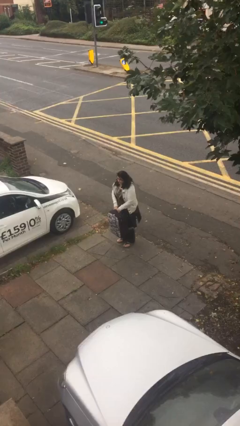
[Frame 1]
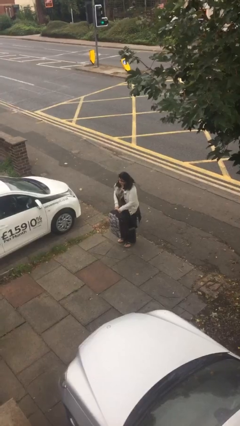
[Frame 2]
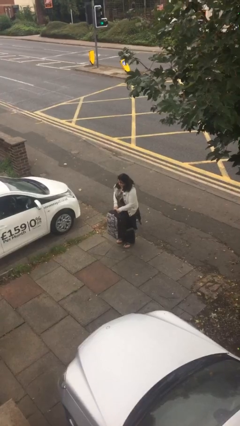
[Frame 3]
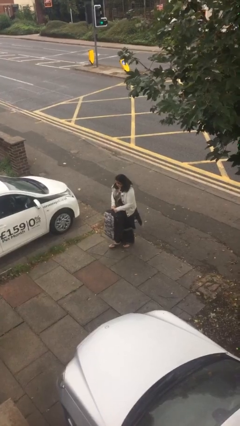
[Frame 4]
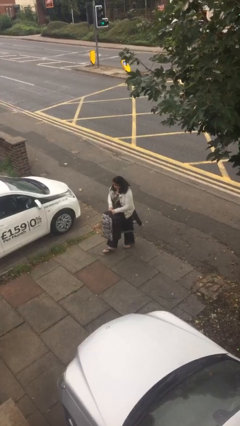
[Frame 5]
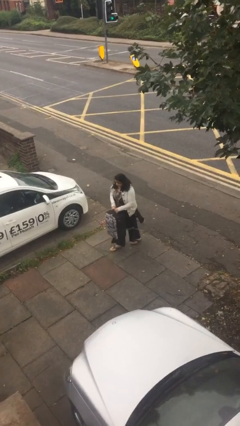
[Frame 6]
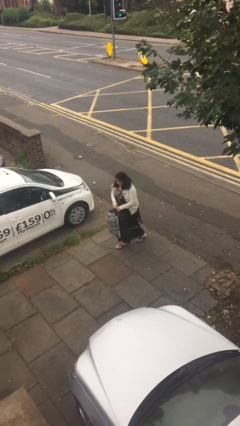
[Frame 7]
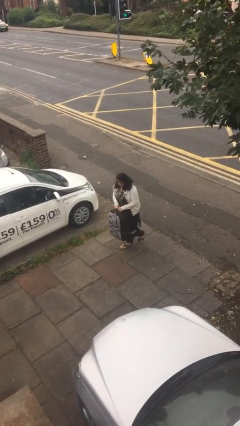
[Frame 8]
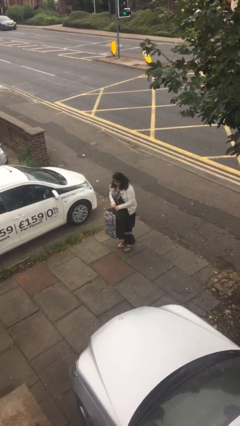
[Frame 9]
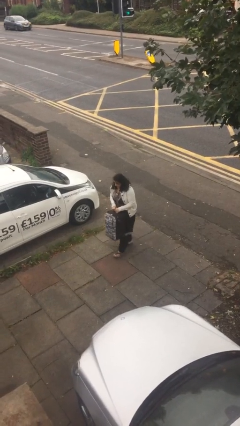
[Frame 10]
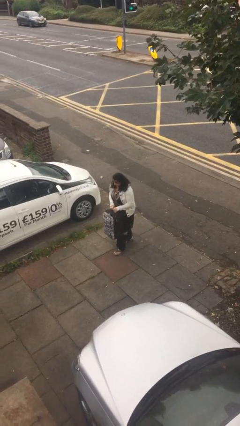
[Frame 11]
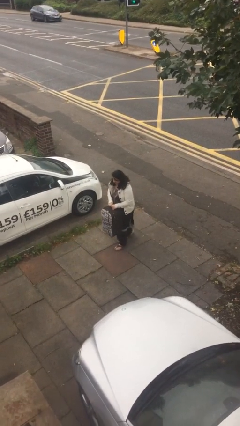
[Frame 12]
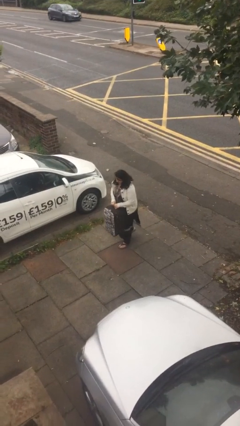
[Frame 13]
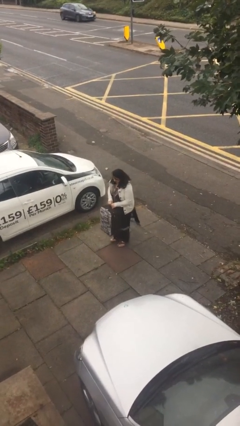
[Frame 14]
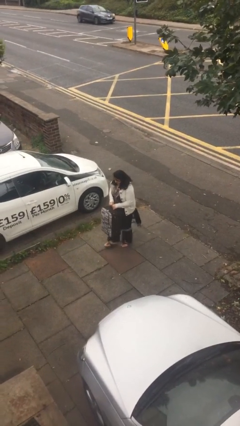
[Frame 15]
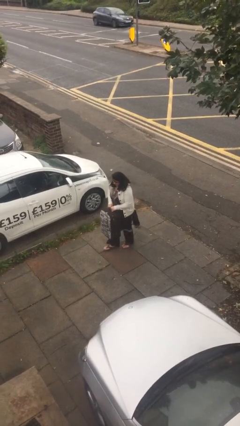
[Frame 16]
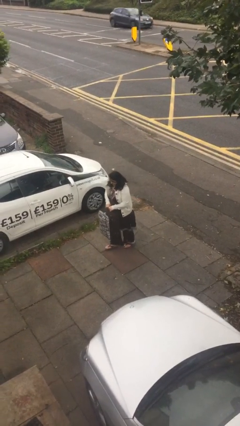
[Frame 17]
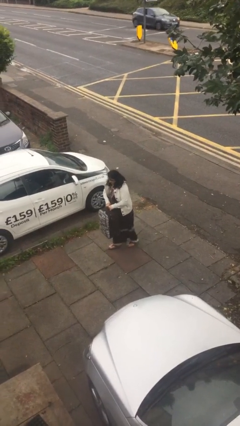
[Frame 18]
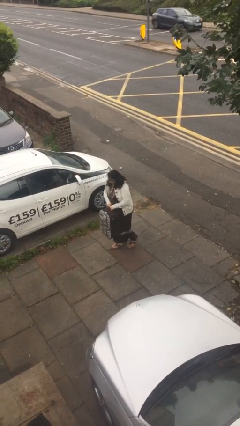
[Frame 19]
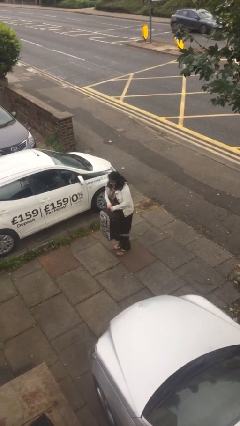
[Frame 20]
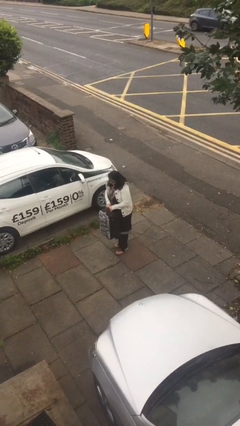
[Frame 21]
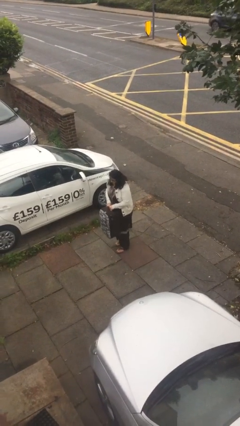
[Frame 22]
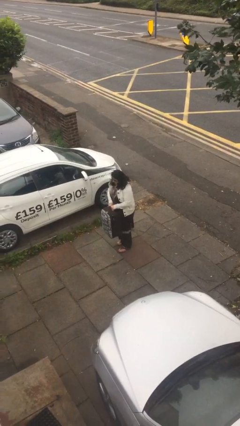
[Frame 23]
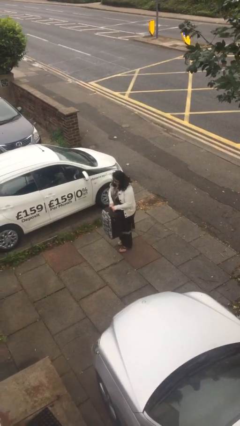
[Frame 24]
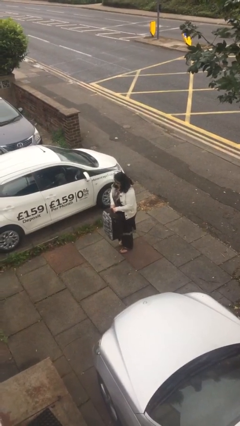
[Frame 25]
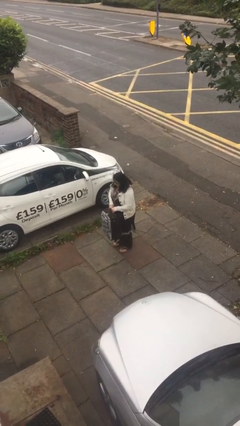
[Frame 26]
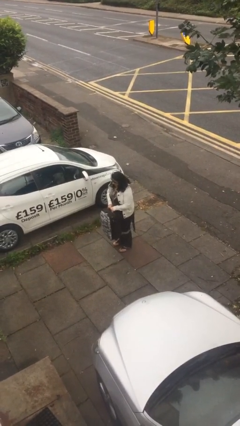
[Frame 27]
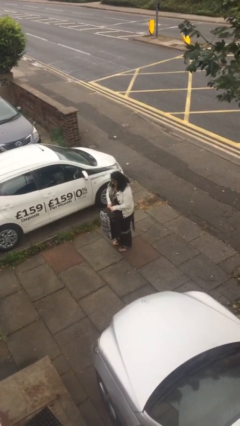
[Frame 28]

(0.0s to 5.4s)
person carries heavy object

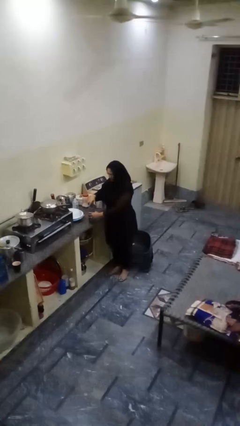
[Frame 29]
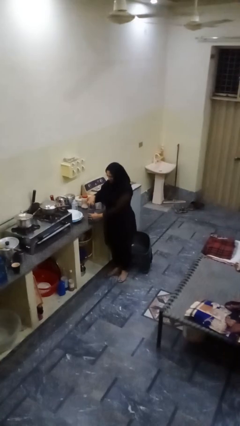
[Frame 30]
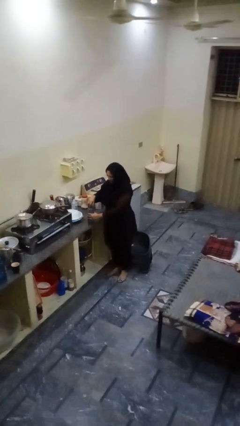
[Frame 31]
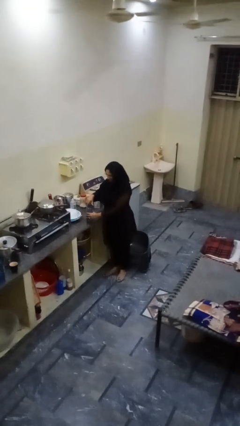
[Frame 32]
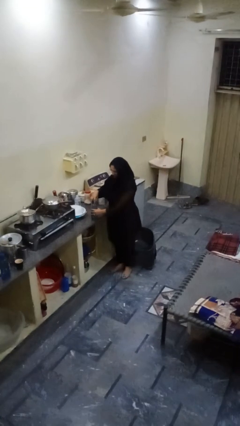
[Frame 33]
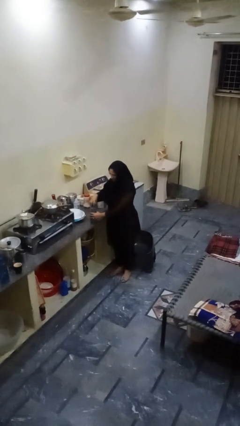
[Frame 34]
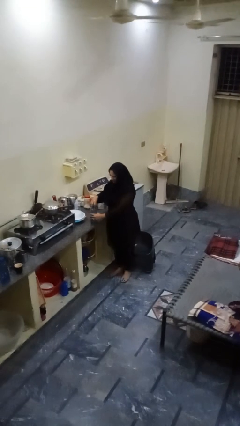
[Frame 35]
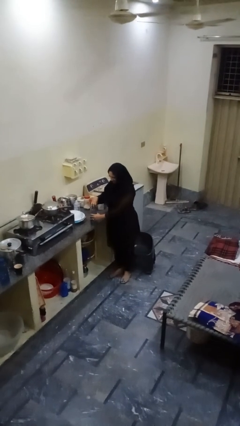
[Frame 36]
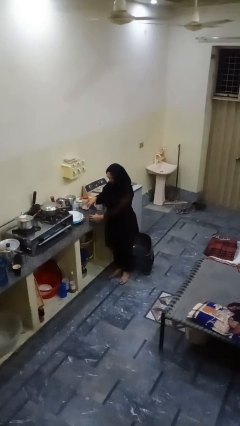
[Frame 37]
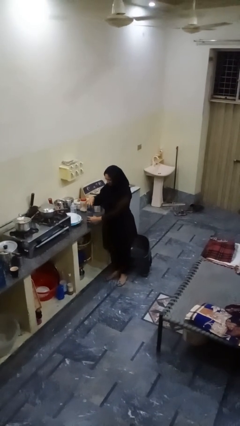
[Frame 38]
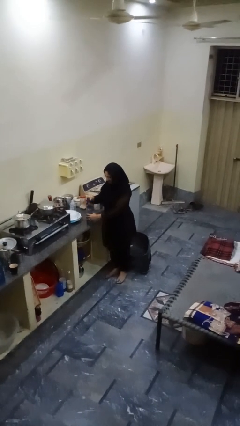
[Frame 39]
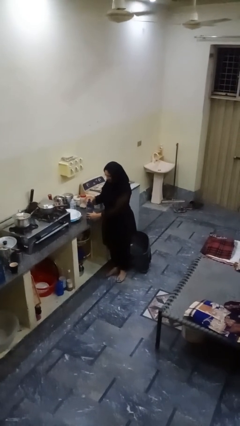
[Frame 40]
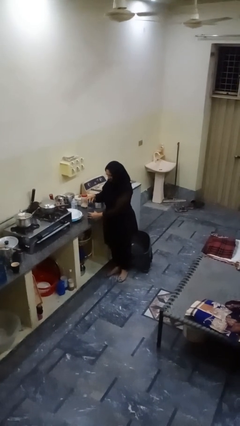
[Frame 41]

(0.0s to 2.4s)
person unscrews lid from bottle

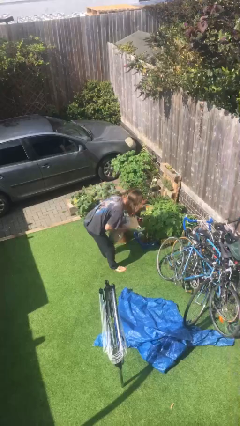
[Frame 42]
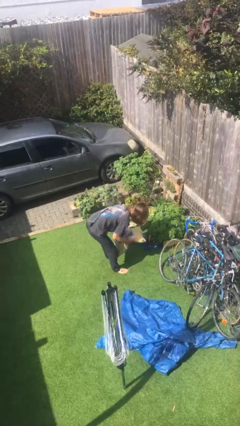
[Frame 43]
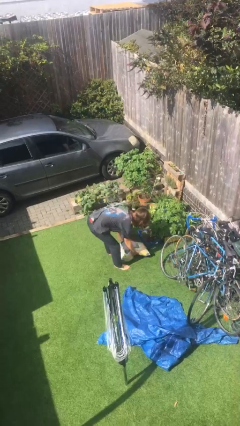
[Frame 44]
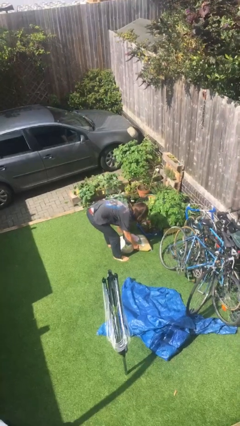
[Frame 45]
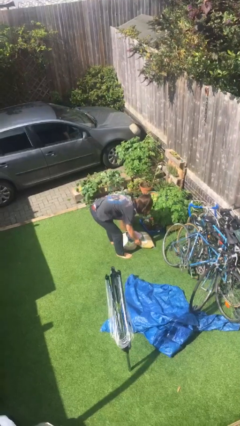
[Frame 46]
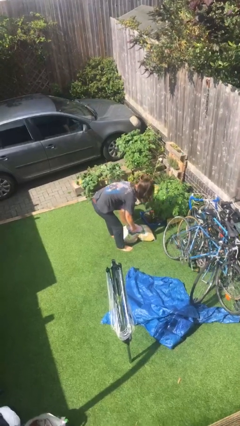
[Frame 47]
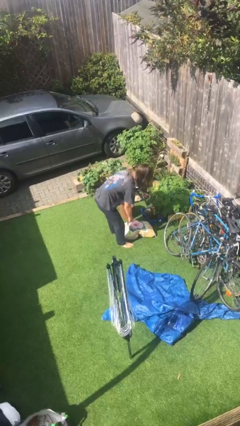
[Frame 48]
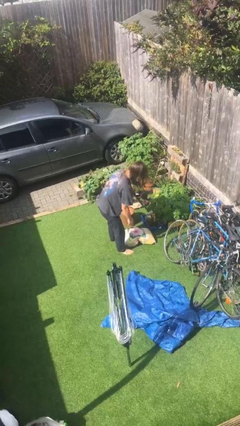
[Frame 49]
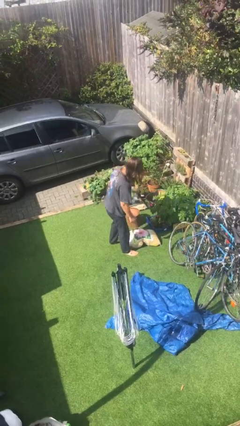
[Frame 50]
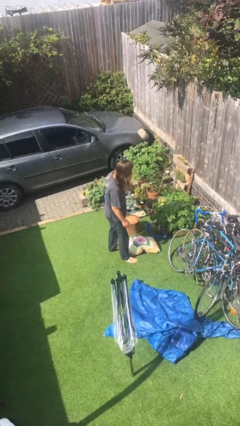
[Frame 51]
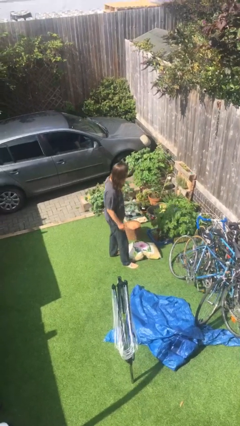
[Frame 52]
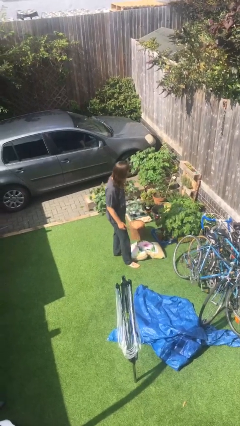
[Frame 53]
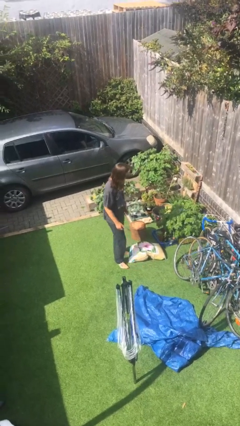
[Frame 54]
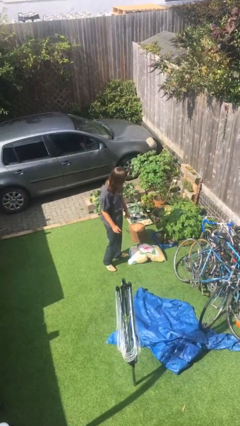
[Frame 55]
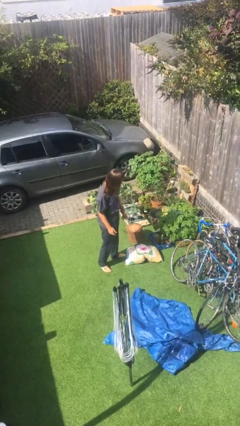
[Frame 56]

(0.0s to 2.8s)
person puts down object on floor

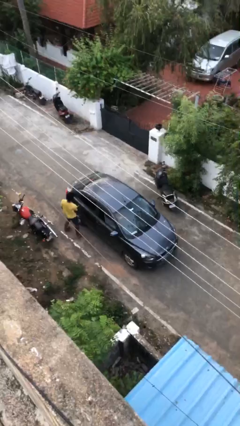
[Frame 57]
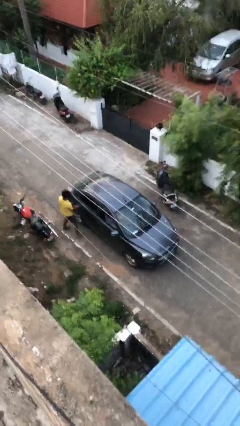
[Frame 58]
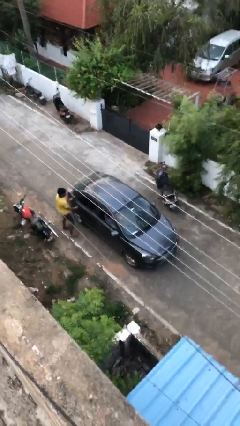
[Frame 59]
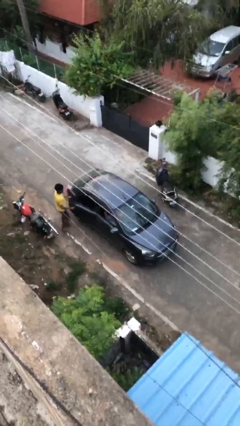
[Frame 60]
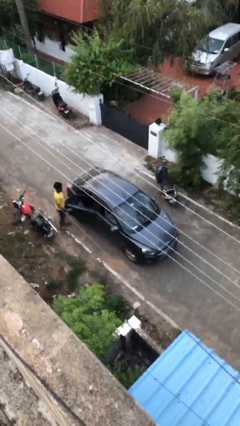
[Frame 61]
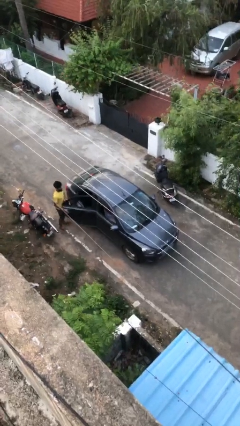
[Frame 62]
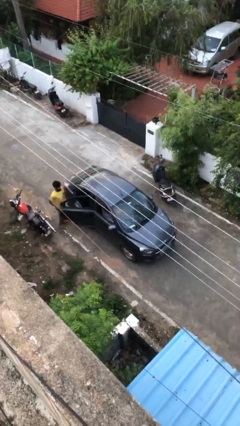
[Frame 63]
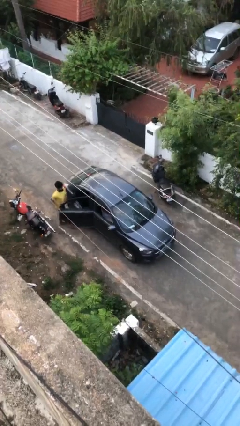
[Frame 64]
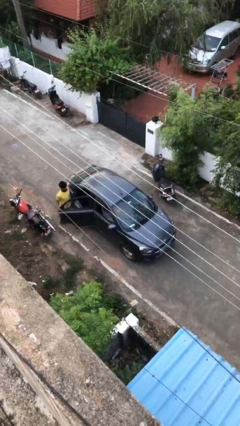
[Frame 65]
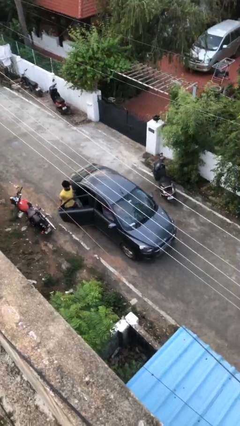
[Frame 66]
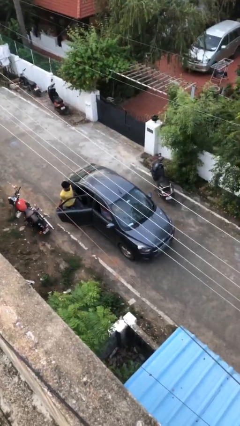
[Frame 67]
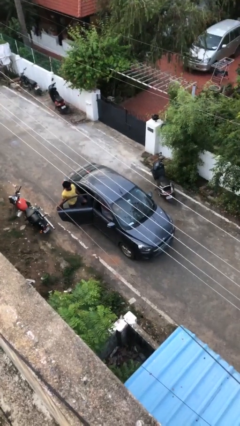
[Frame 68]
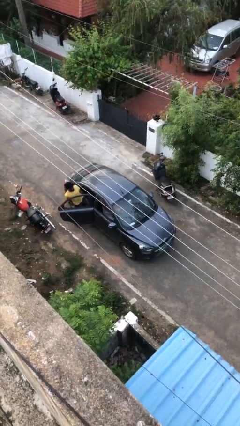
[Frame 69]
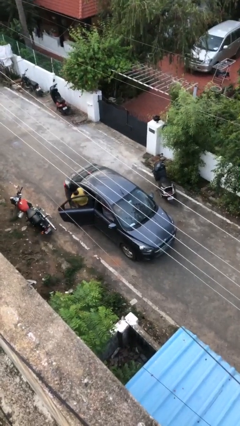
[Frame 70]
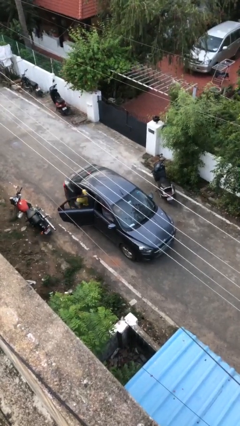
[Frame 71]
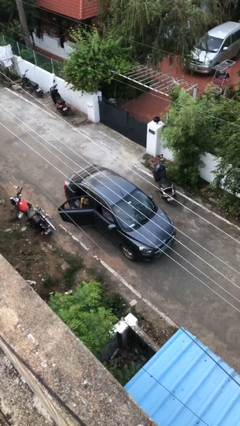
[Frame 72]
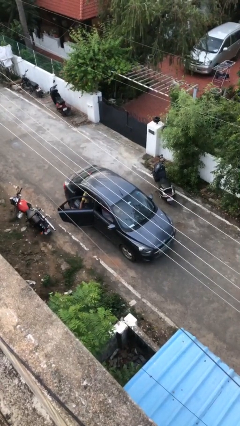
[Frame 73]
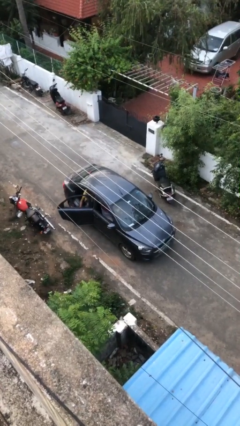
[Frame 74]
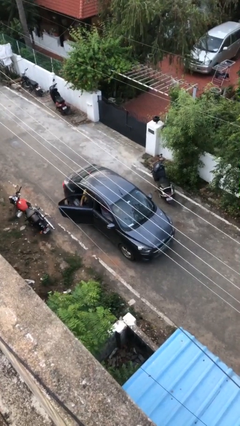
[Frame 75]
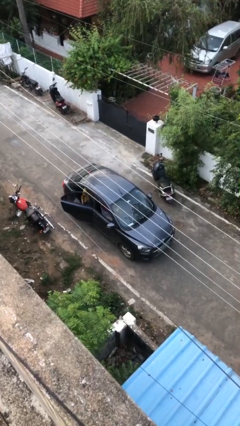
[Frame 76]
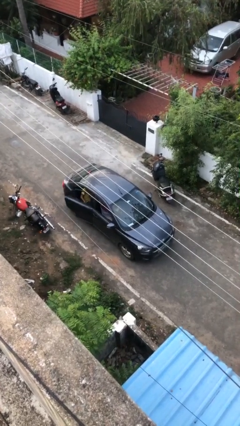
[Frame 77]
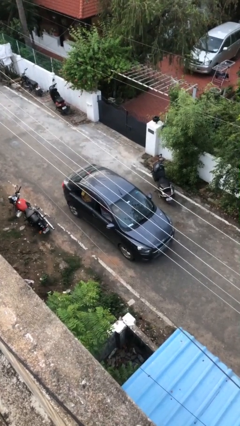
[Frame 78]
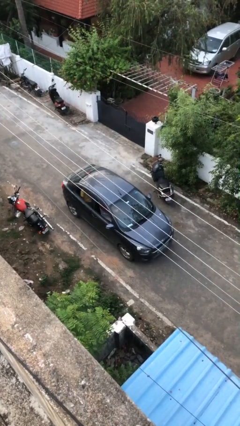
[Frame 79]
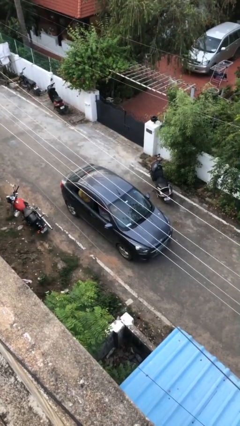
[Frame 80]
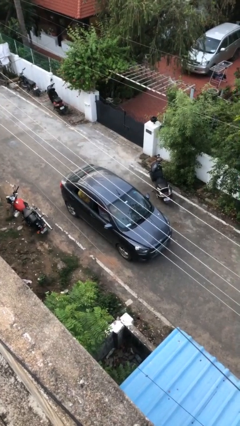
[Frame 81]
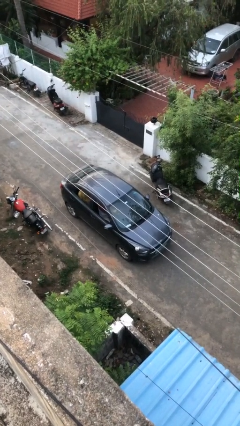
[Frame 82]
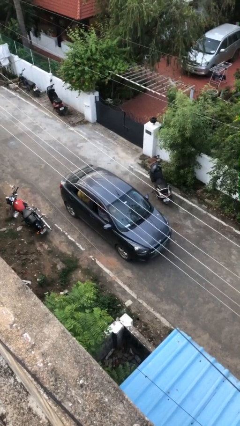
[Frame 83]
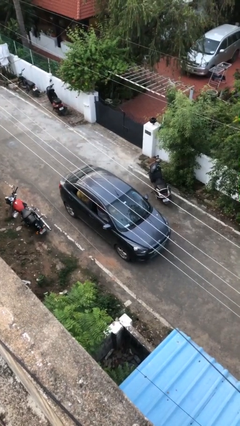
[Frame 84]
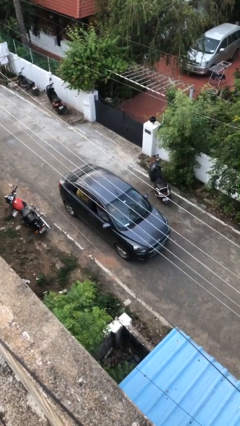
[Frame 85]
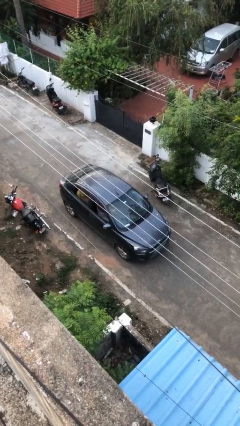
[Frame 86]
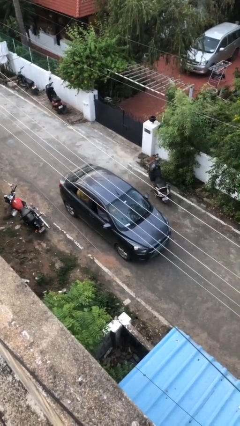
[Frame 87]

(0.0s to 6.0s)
car picks up person

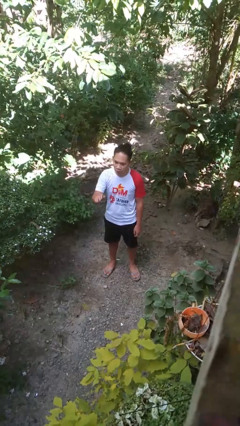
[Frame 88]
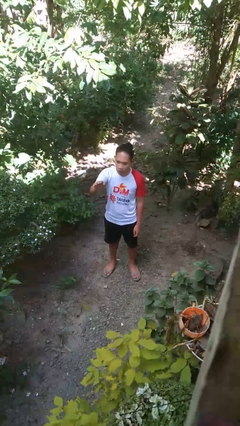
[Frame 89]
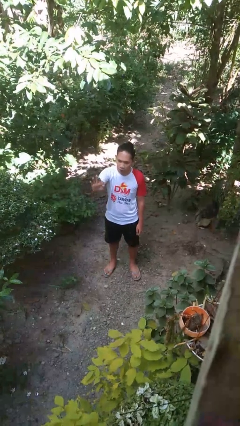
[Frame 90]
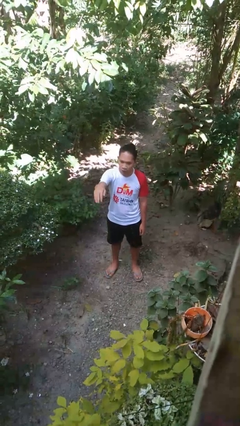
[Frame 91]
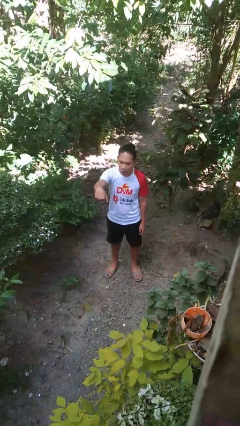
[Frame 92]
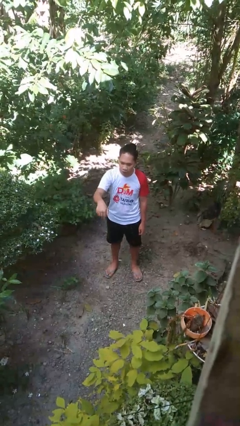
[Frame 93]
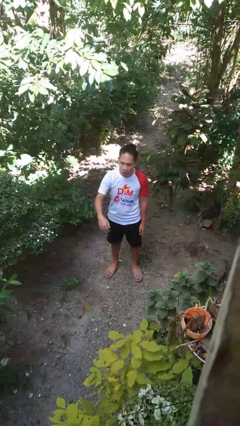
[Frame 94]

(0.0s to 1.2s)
person gestures come here
